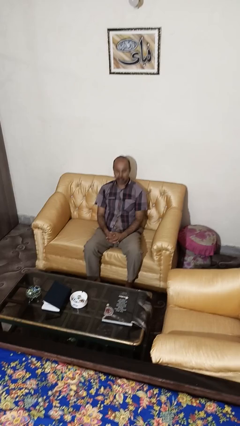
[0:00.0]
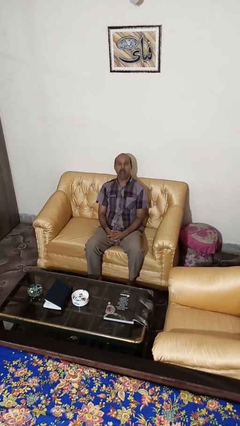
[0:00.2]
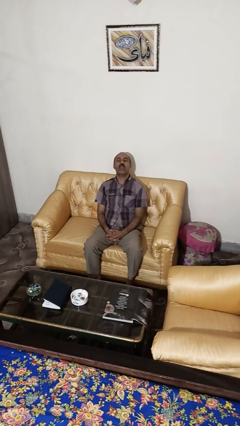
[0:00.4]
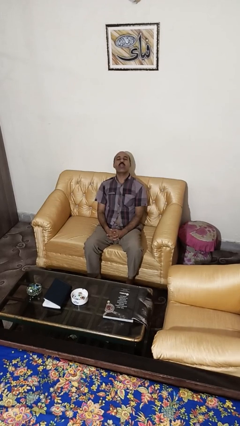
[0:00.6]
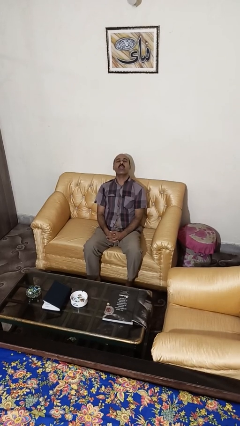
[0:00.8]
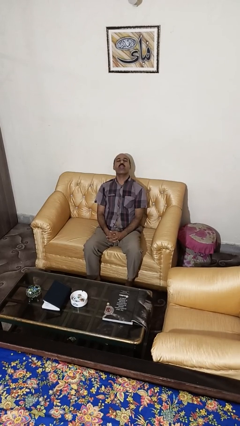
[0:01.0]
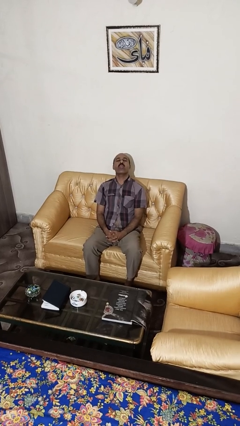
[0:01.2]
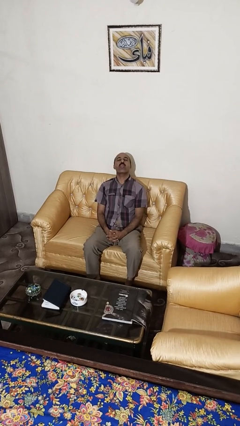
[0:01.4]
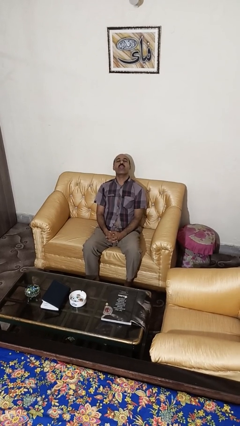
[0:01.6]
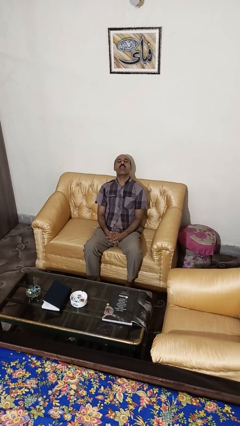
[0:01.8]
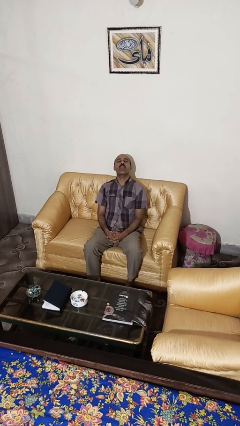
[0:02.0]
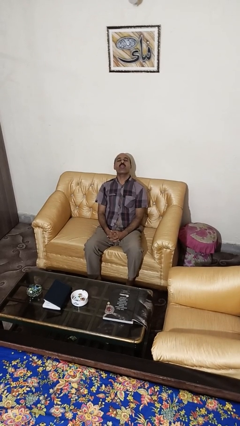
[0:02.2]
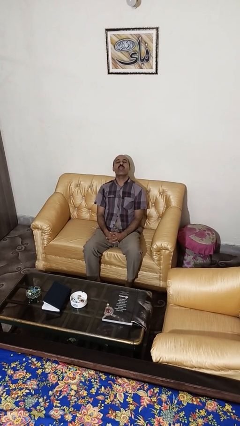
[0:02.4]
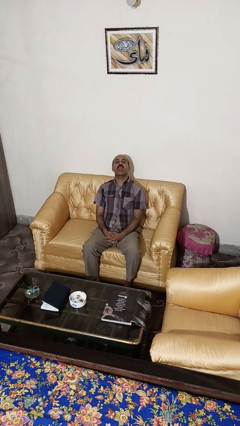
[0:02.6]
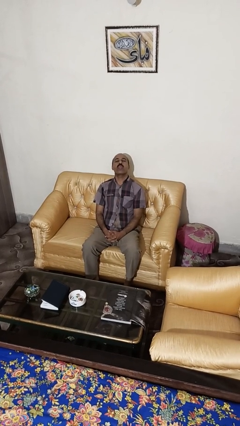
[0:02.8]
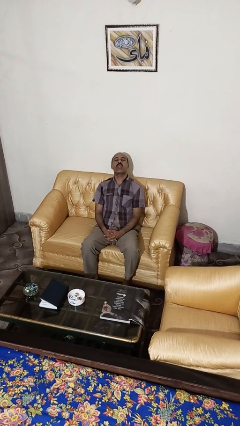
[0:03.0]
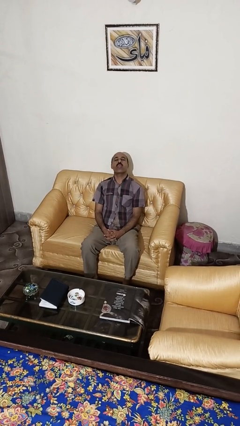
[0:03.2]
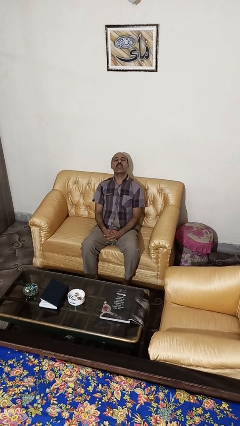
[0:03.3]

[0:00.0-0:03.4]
person sticks out tongue

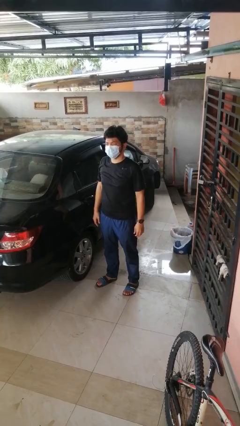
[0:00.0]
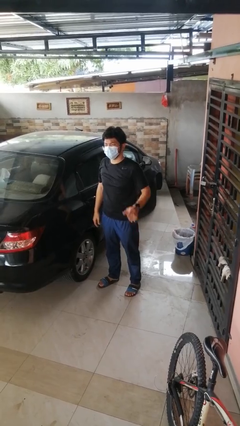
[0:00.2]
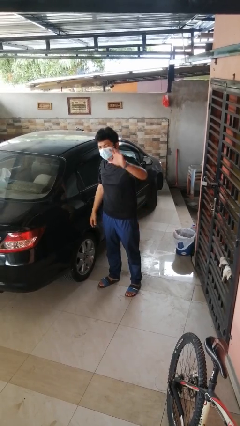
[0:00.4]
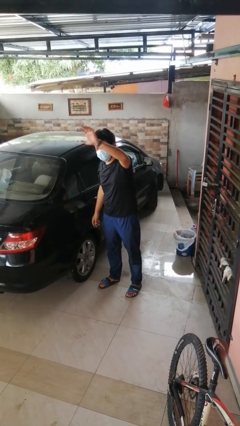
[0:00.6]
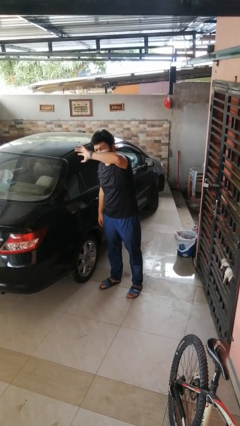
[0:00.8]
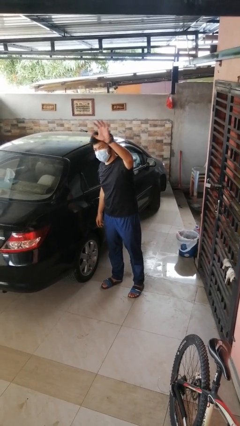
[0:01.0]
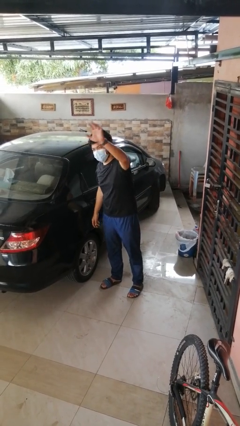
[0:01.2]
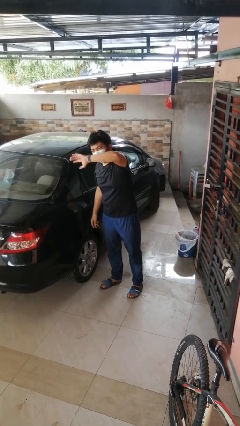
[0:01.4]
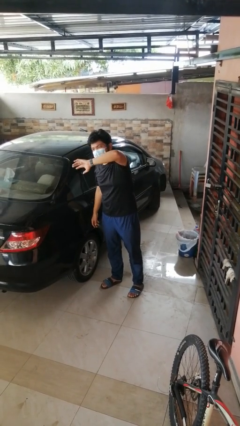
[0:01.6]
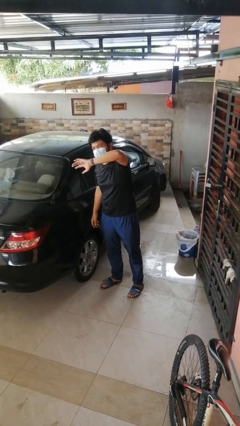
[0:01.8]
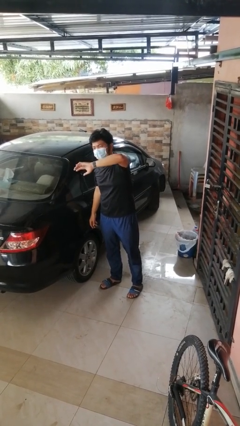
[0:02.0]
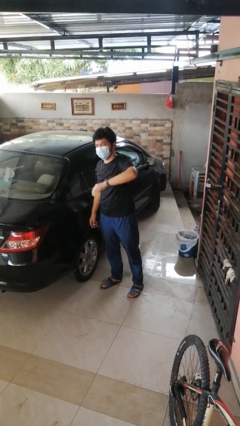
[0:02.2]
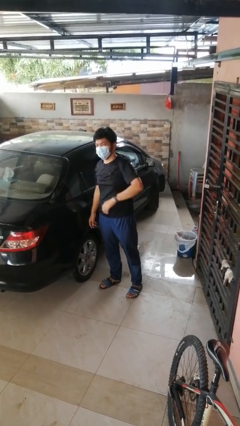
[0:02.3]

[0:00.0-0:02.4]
person waves at person

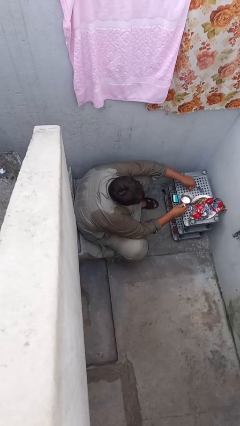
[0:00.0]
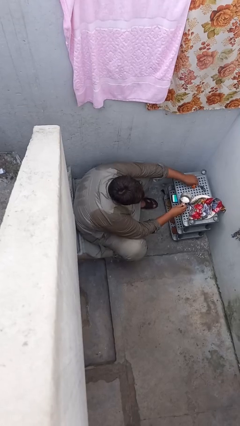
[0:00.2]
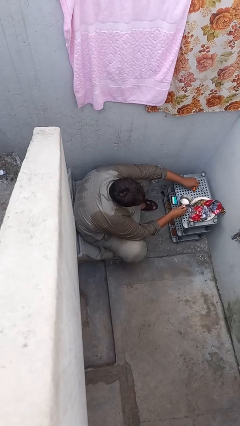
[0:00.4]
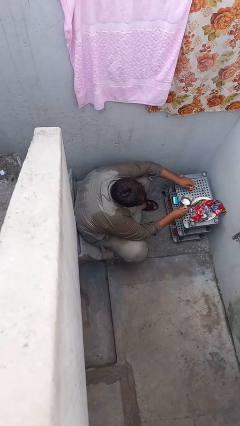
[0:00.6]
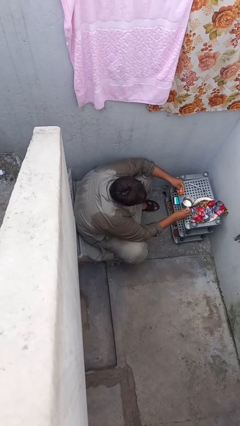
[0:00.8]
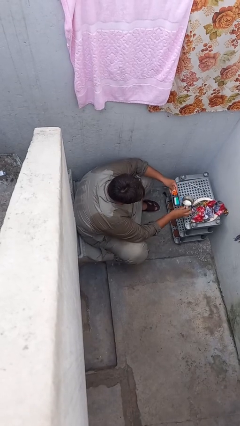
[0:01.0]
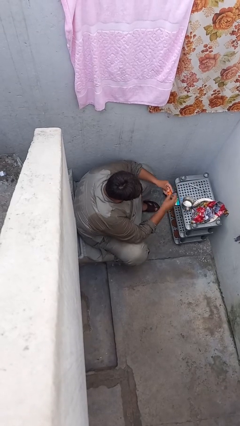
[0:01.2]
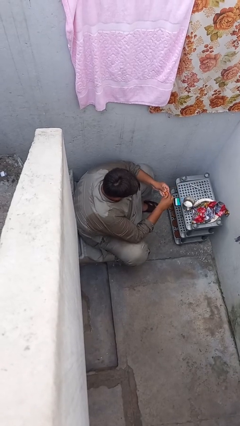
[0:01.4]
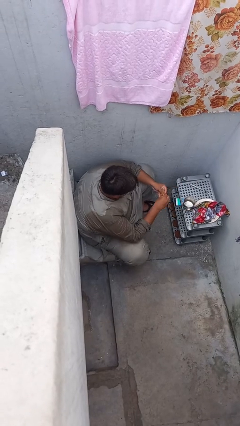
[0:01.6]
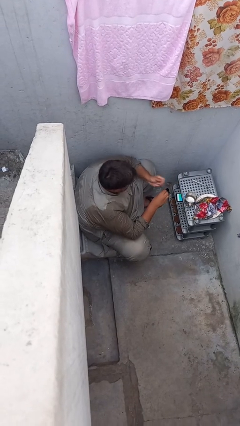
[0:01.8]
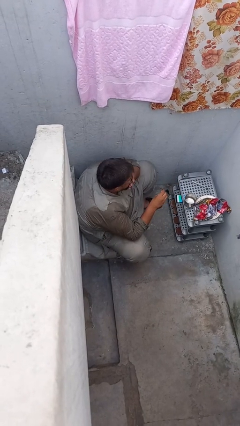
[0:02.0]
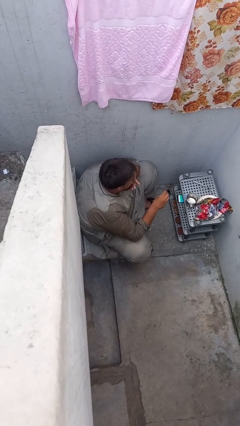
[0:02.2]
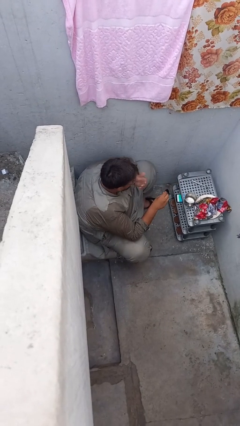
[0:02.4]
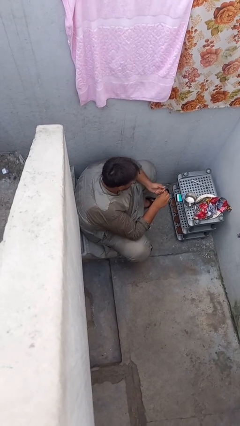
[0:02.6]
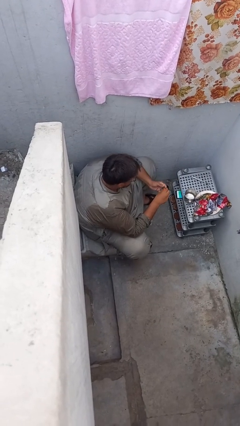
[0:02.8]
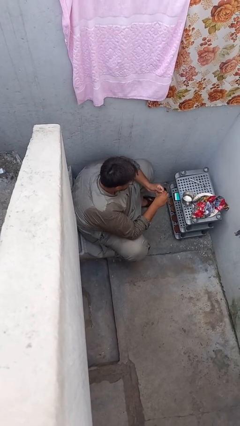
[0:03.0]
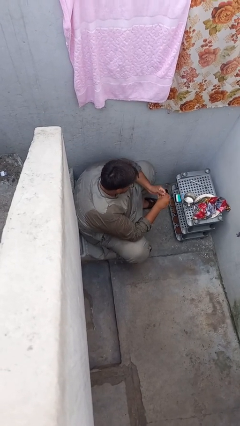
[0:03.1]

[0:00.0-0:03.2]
person takes medicine pills

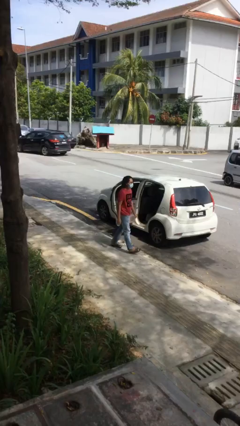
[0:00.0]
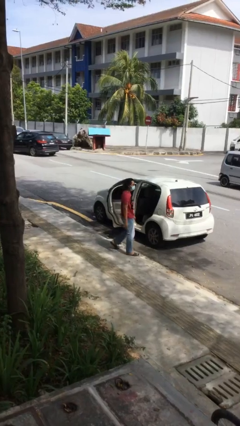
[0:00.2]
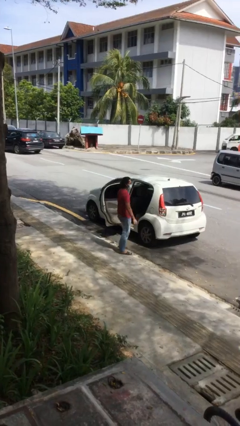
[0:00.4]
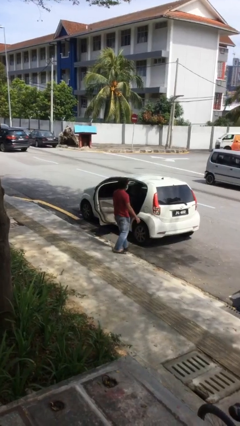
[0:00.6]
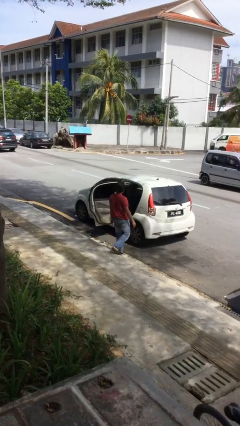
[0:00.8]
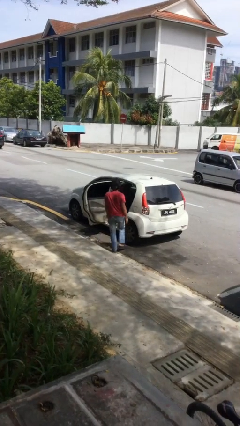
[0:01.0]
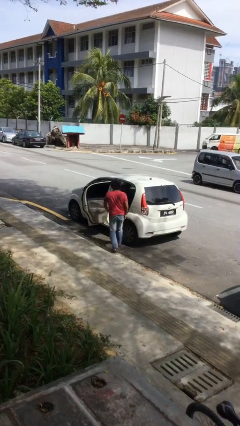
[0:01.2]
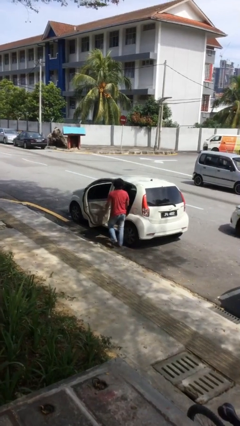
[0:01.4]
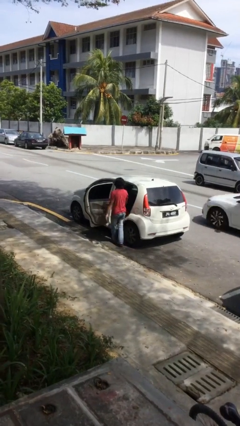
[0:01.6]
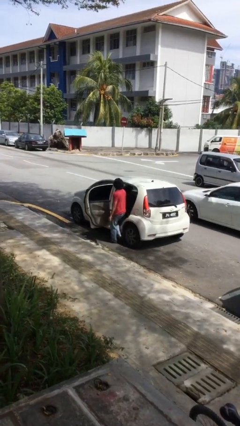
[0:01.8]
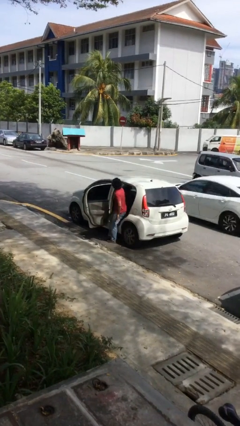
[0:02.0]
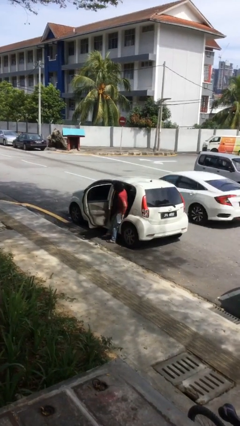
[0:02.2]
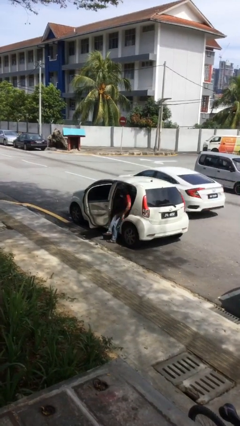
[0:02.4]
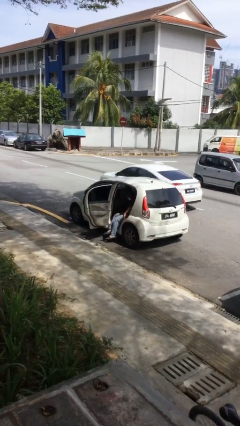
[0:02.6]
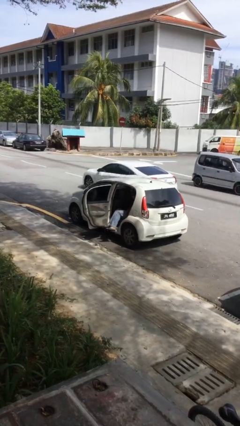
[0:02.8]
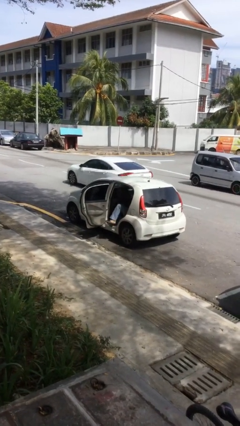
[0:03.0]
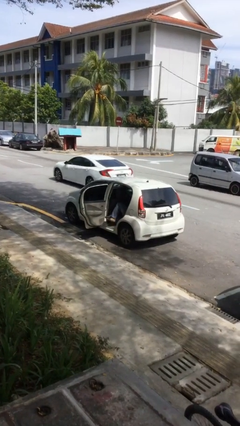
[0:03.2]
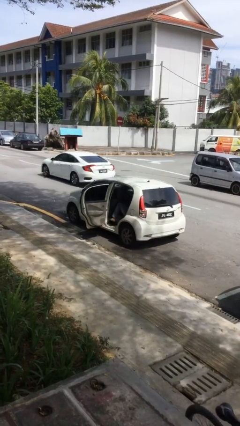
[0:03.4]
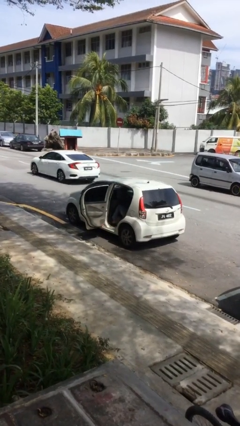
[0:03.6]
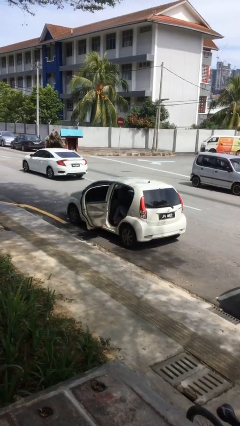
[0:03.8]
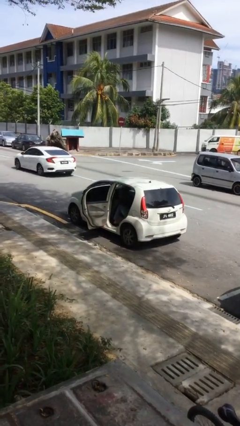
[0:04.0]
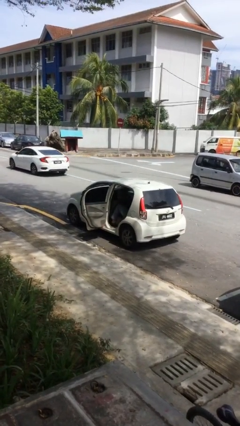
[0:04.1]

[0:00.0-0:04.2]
person enters car

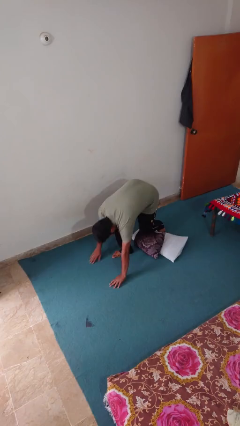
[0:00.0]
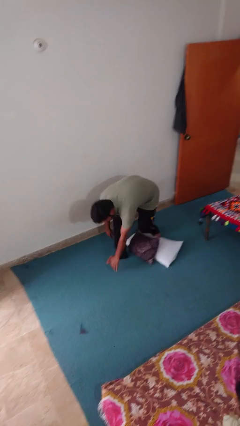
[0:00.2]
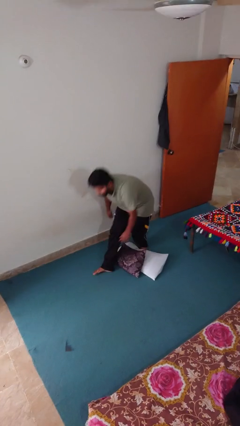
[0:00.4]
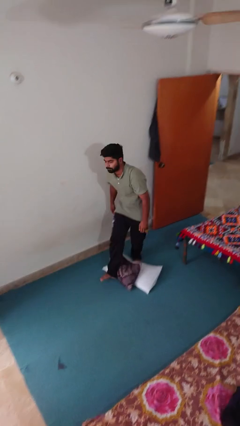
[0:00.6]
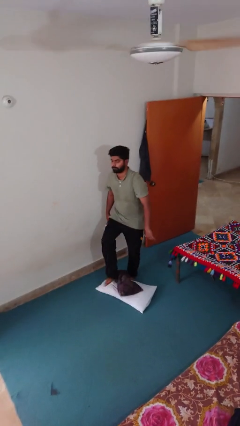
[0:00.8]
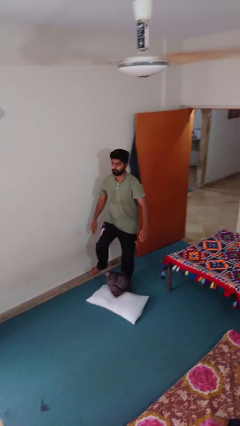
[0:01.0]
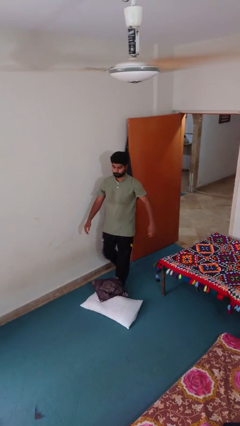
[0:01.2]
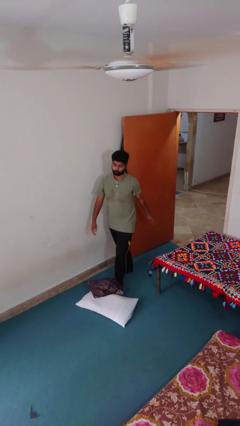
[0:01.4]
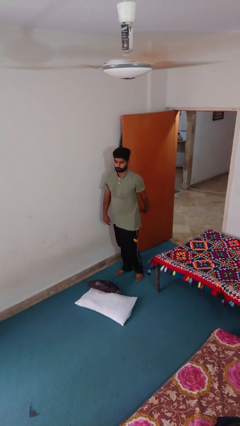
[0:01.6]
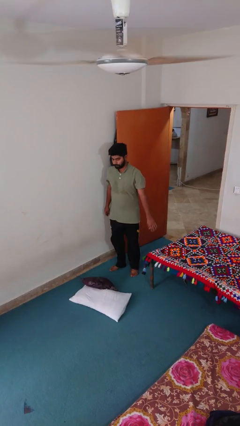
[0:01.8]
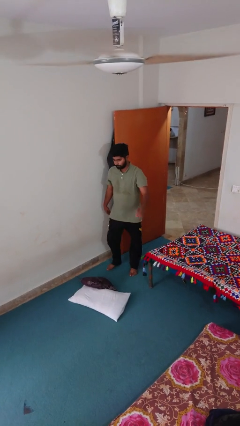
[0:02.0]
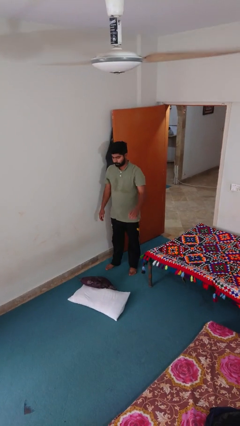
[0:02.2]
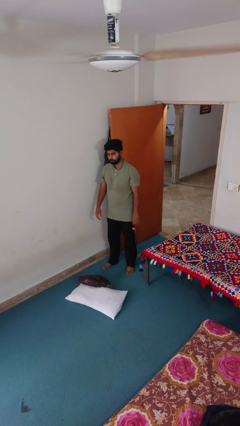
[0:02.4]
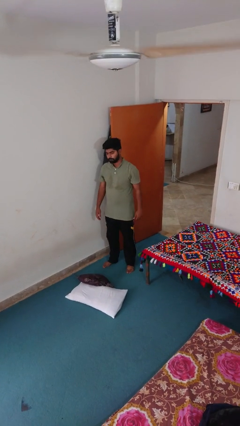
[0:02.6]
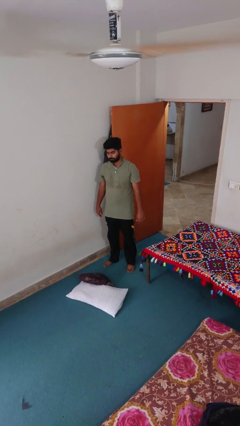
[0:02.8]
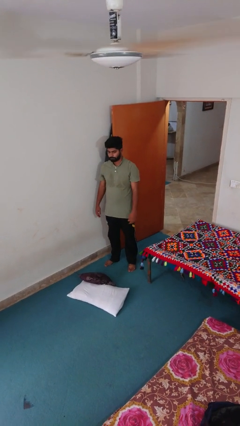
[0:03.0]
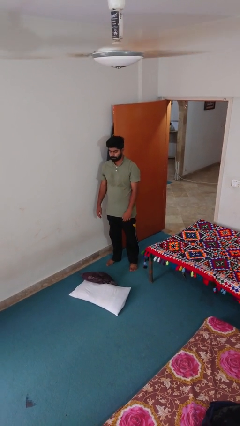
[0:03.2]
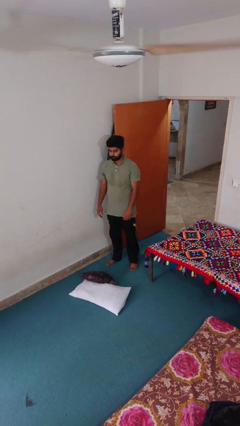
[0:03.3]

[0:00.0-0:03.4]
person stands up from floor

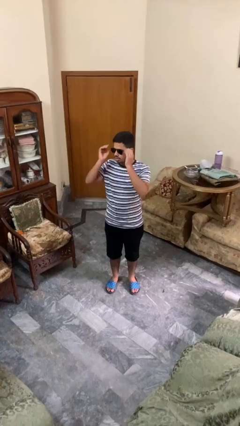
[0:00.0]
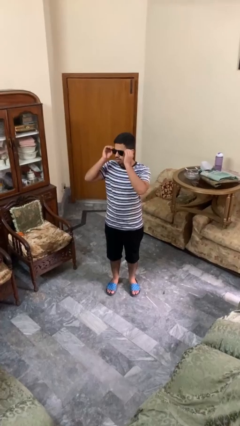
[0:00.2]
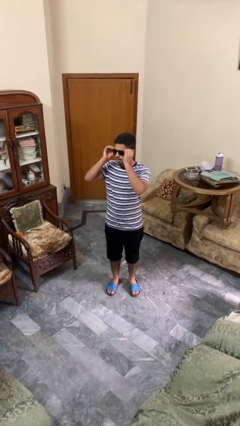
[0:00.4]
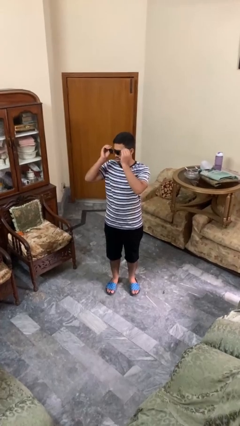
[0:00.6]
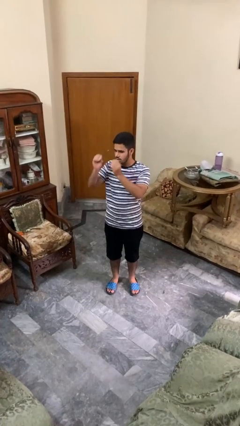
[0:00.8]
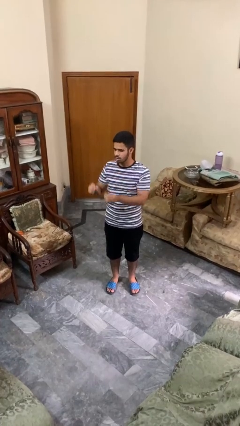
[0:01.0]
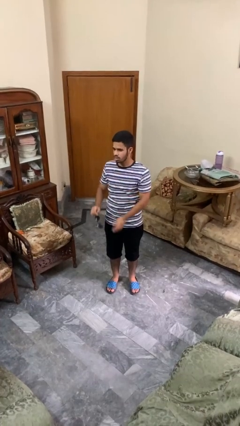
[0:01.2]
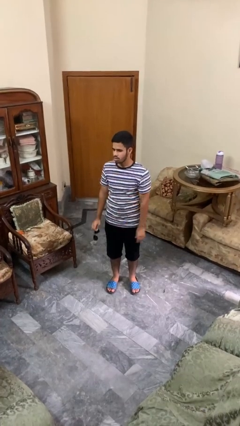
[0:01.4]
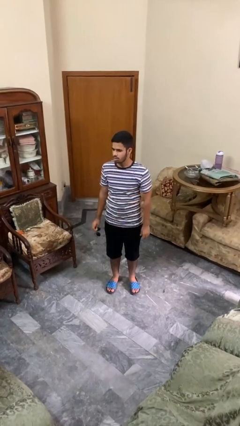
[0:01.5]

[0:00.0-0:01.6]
person takes off sunglasses
